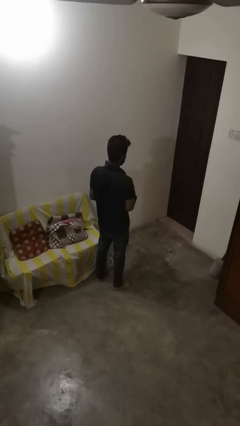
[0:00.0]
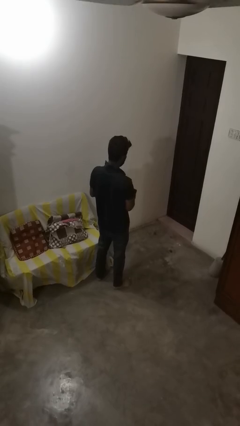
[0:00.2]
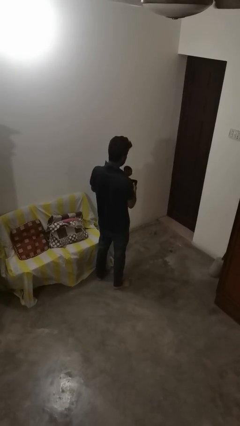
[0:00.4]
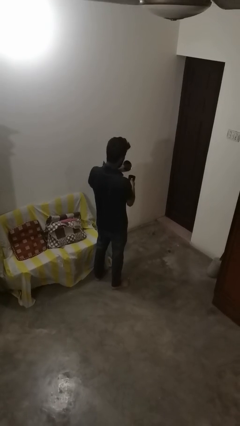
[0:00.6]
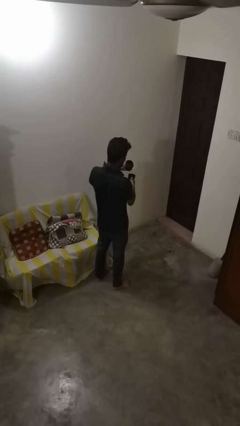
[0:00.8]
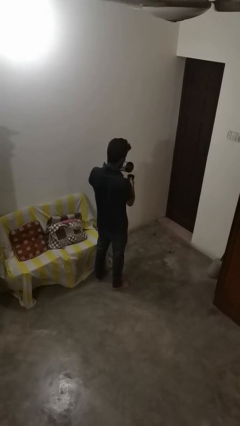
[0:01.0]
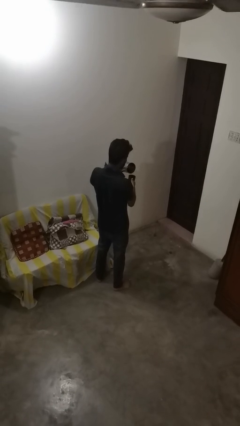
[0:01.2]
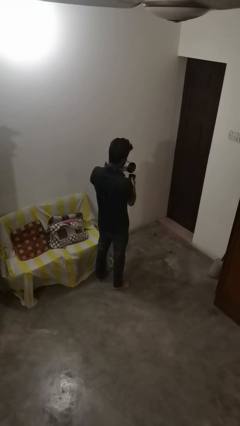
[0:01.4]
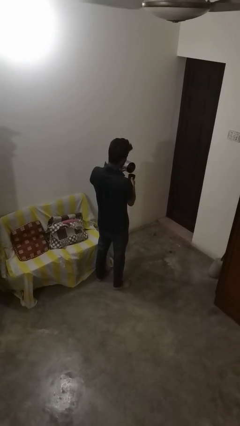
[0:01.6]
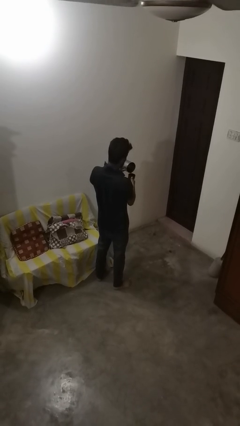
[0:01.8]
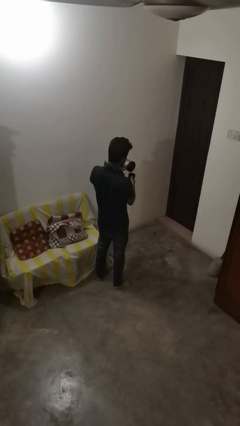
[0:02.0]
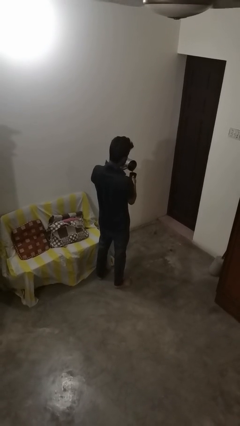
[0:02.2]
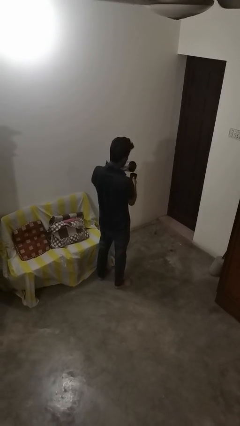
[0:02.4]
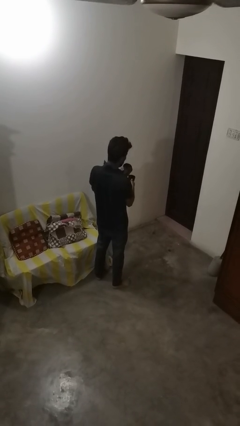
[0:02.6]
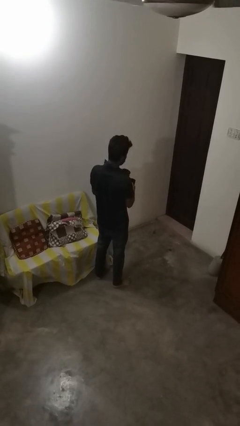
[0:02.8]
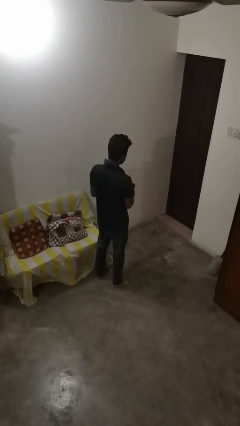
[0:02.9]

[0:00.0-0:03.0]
person pours coffee into mug

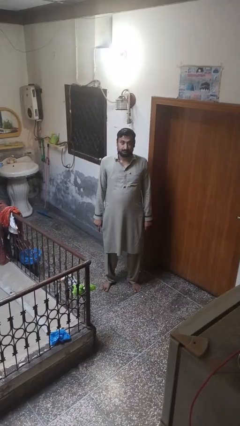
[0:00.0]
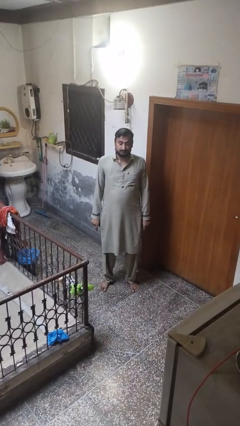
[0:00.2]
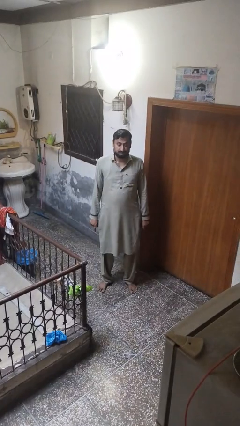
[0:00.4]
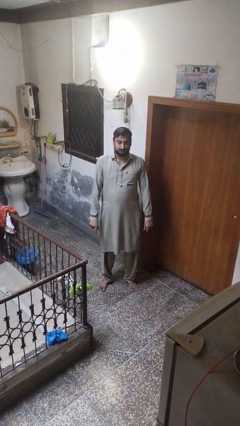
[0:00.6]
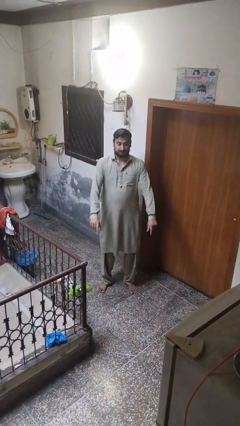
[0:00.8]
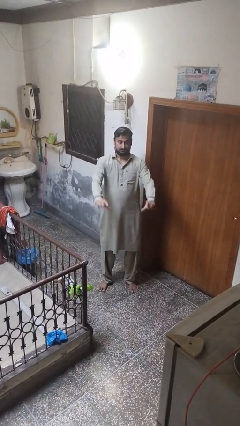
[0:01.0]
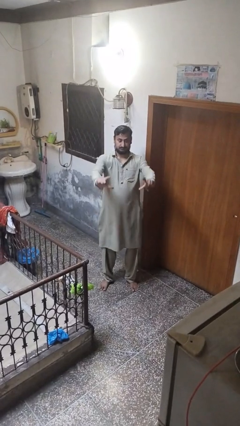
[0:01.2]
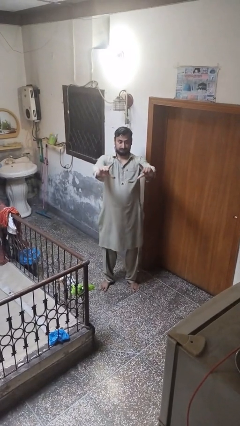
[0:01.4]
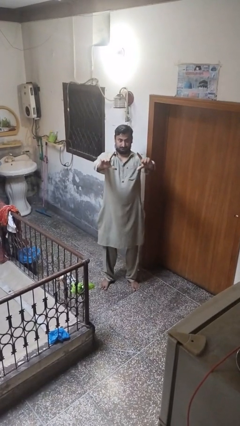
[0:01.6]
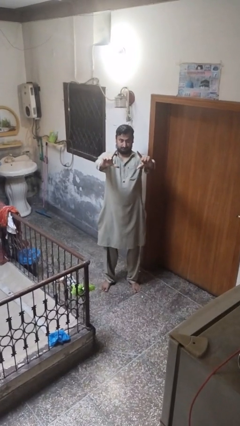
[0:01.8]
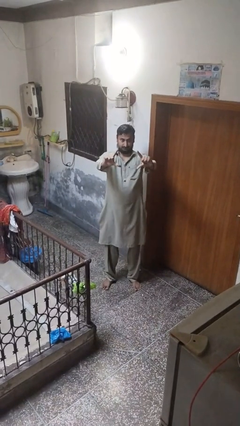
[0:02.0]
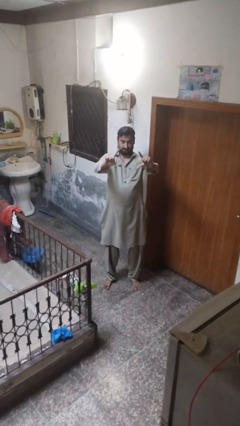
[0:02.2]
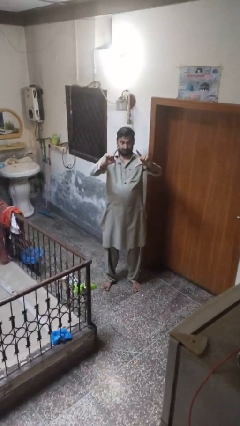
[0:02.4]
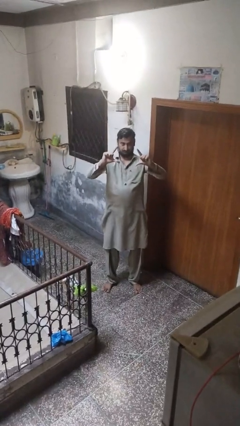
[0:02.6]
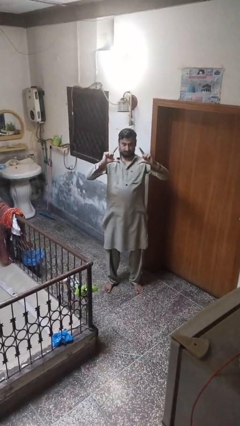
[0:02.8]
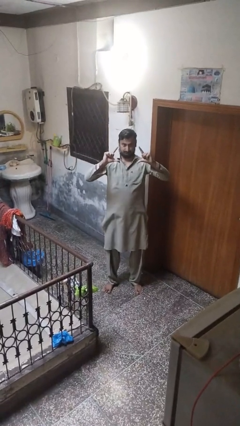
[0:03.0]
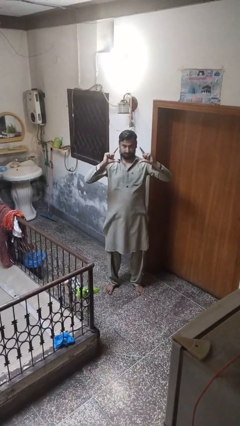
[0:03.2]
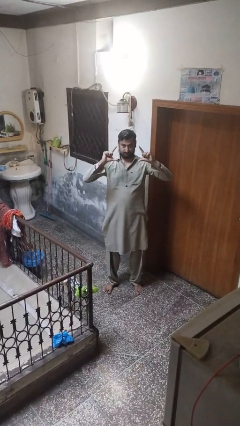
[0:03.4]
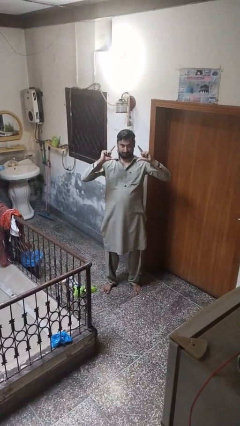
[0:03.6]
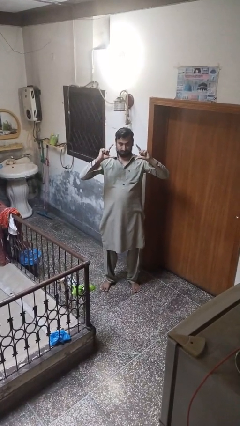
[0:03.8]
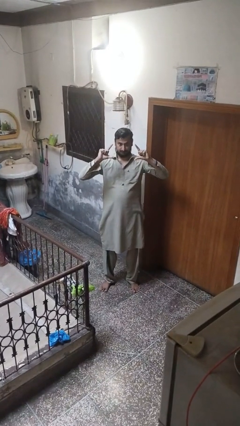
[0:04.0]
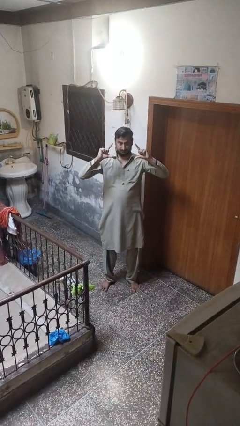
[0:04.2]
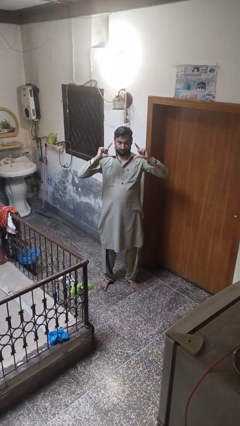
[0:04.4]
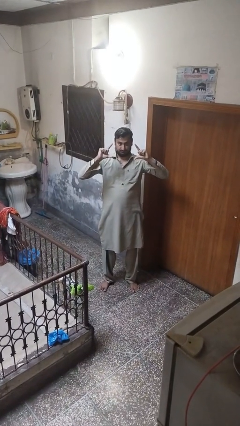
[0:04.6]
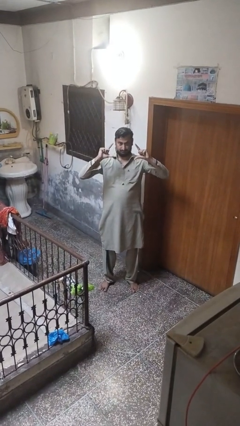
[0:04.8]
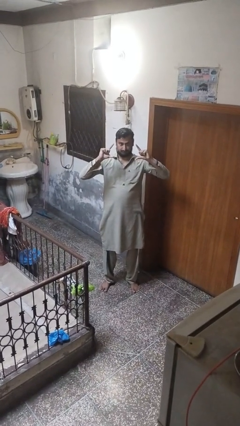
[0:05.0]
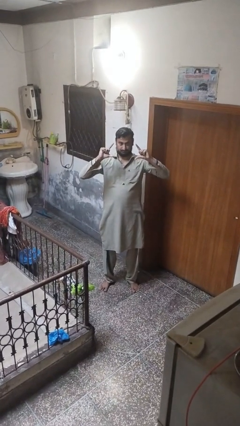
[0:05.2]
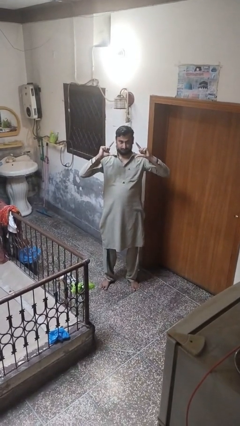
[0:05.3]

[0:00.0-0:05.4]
person gestures zoom in

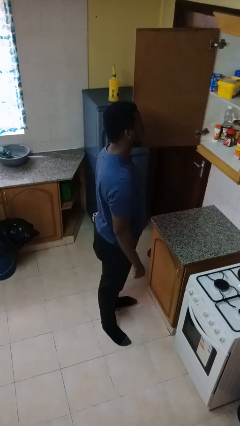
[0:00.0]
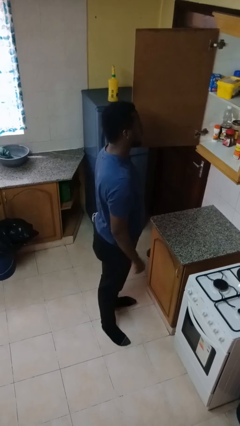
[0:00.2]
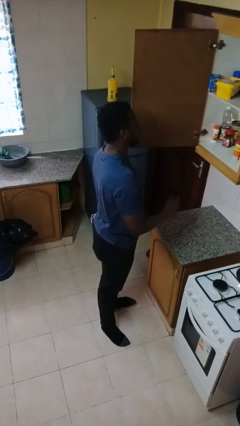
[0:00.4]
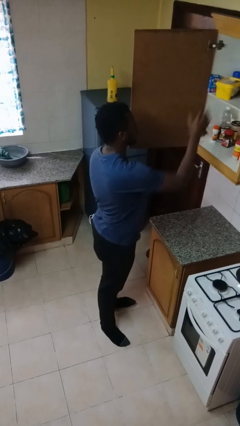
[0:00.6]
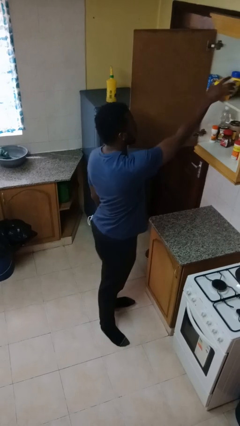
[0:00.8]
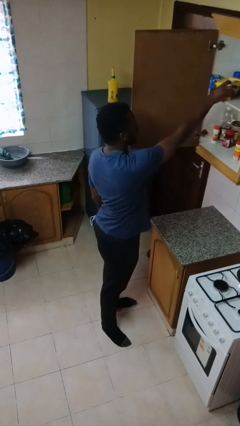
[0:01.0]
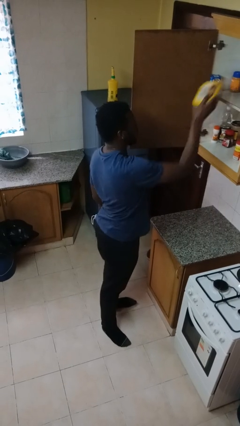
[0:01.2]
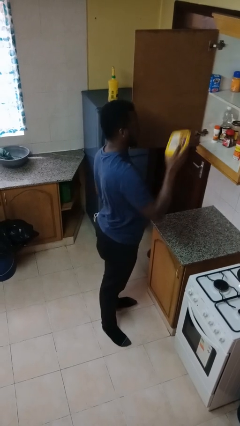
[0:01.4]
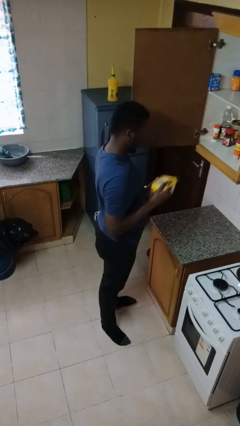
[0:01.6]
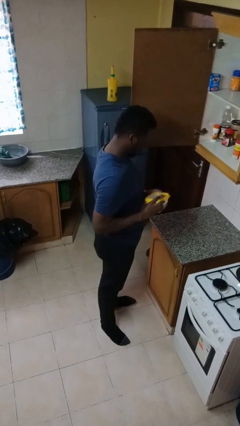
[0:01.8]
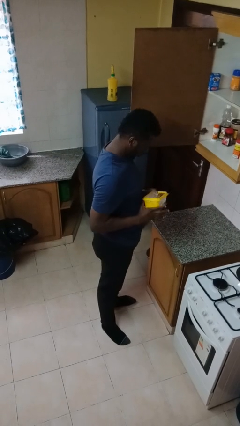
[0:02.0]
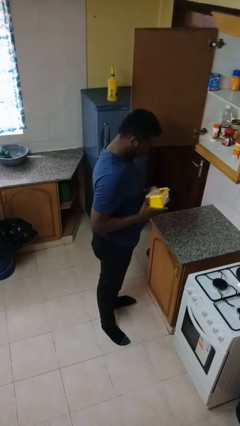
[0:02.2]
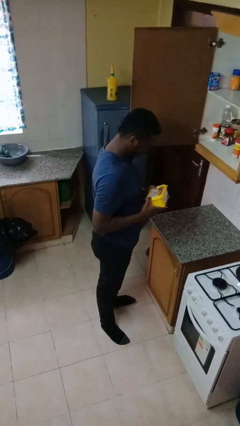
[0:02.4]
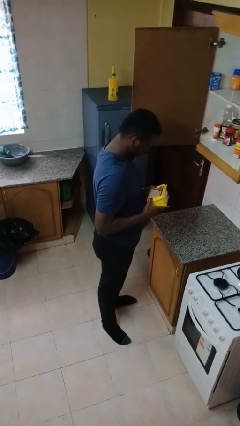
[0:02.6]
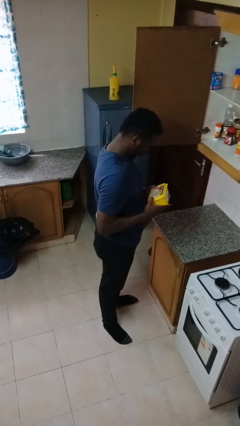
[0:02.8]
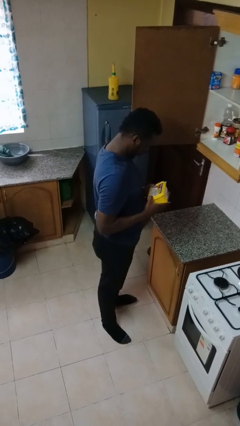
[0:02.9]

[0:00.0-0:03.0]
person picks up object from shelf

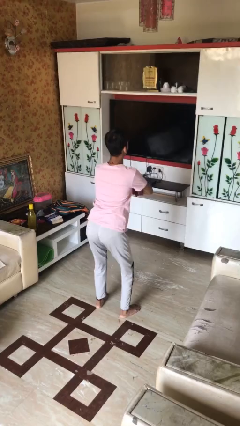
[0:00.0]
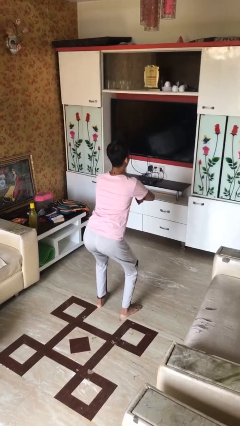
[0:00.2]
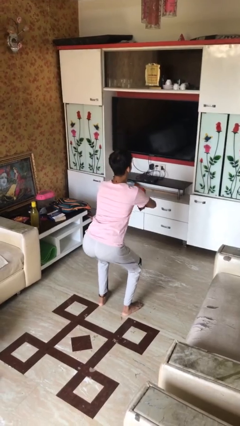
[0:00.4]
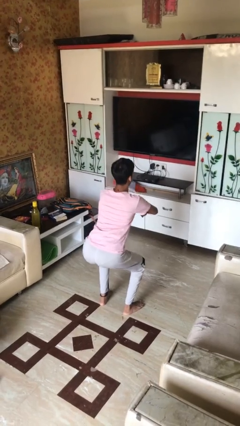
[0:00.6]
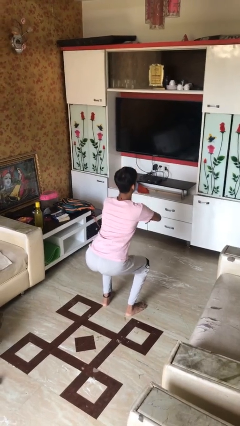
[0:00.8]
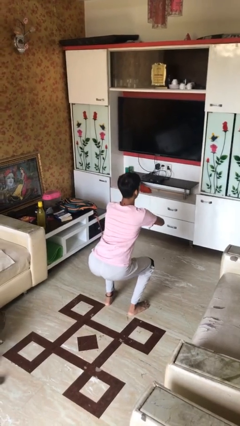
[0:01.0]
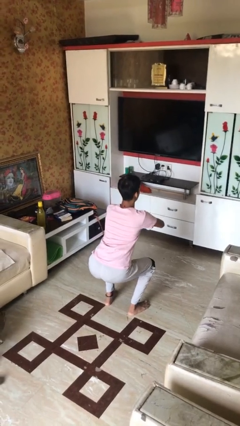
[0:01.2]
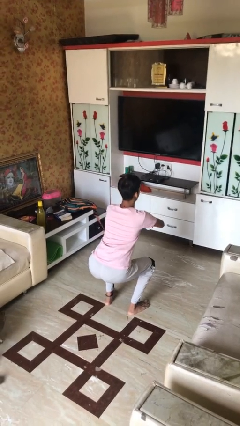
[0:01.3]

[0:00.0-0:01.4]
person squats

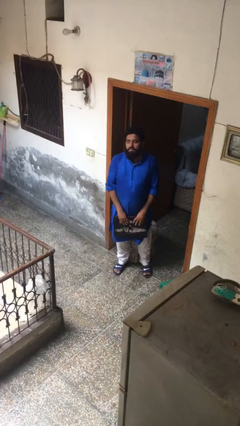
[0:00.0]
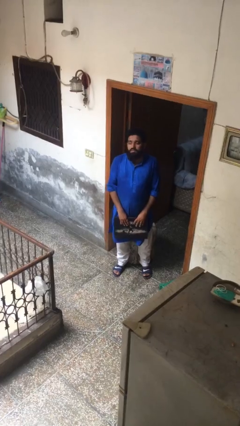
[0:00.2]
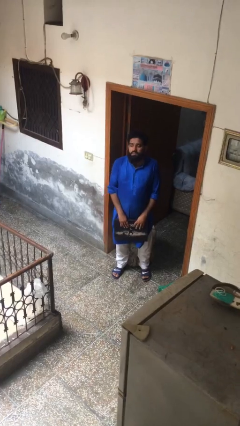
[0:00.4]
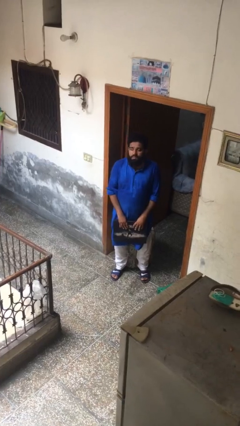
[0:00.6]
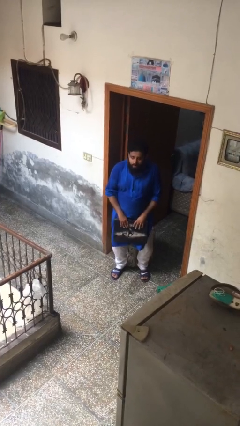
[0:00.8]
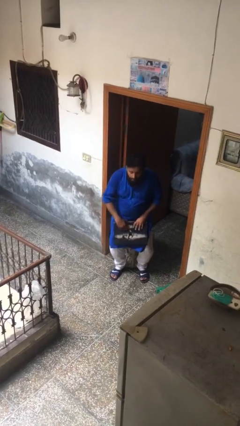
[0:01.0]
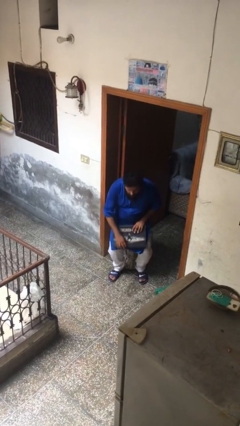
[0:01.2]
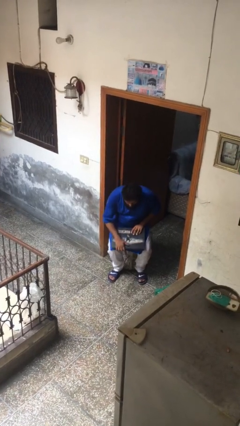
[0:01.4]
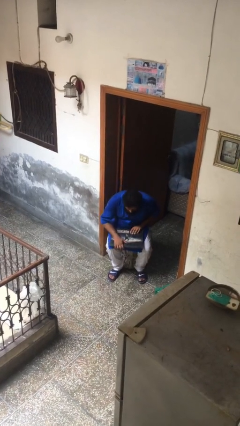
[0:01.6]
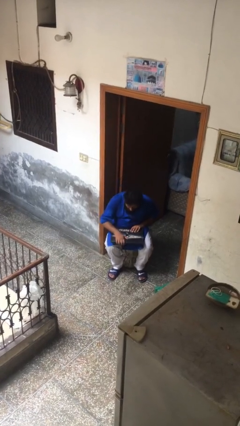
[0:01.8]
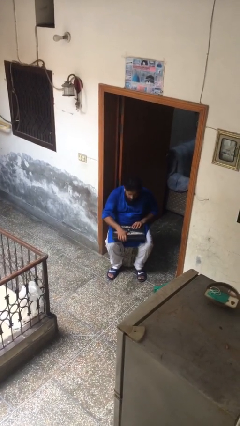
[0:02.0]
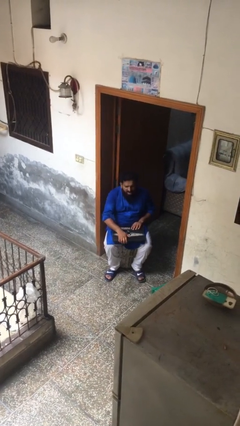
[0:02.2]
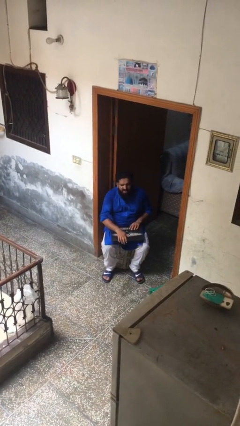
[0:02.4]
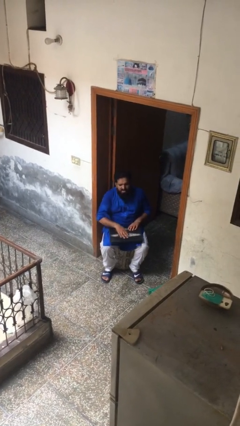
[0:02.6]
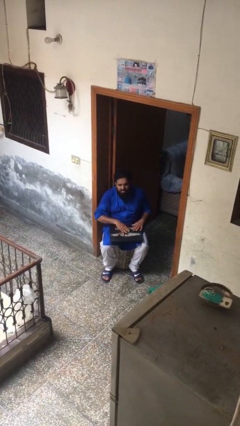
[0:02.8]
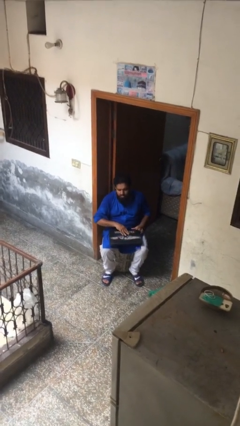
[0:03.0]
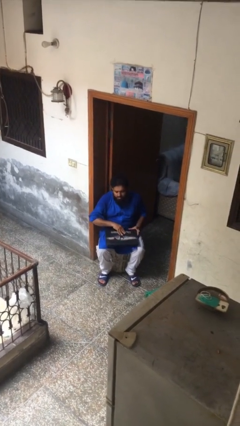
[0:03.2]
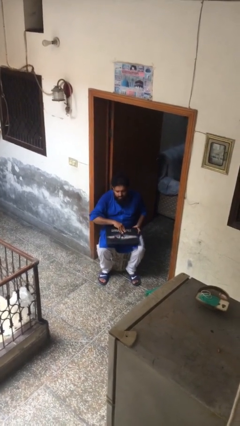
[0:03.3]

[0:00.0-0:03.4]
person sits down

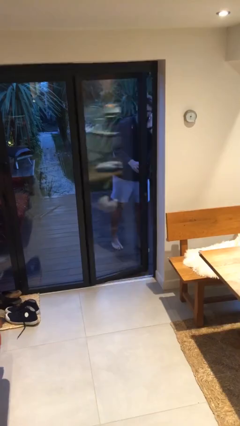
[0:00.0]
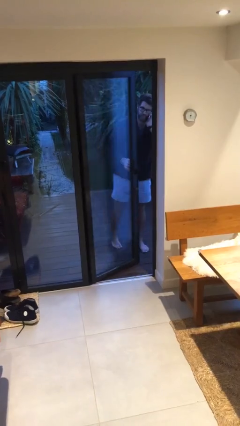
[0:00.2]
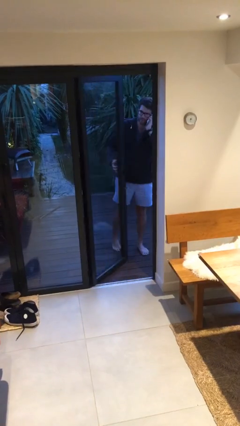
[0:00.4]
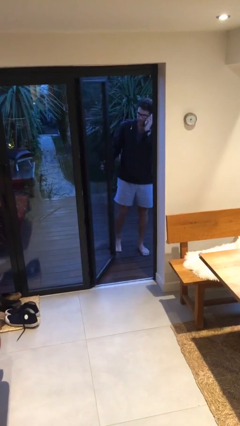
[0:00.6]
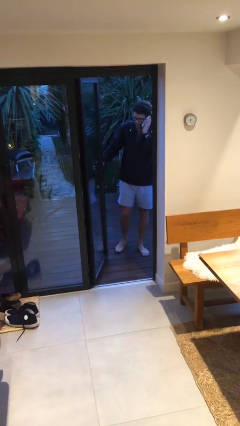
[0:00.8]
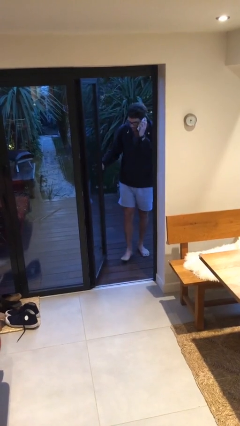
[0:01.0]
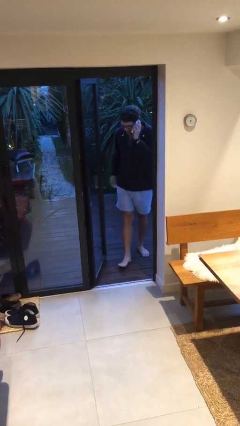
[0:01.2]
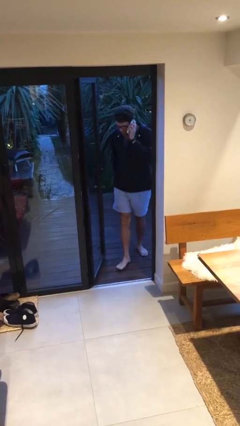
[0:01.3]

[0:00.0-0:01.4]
person opens facility door
